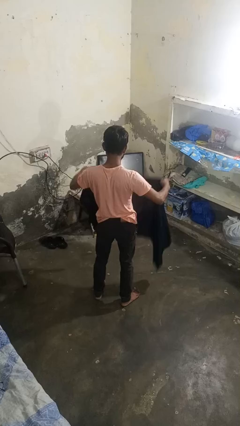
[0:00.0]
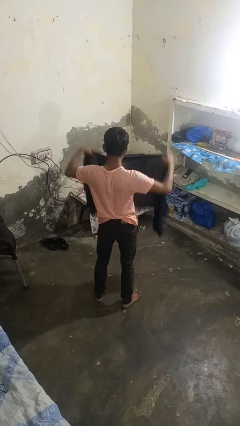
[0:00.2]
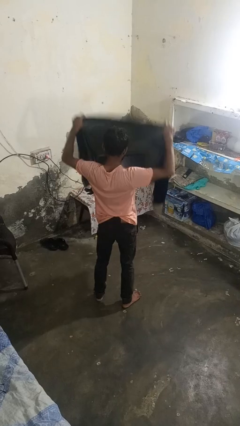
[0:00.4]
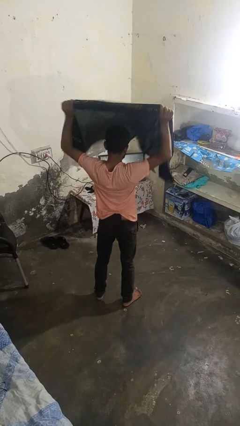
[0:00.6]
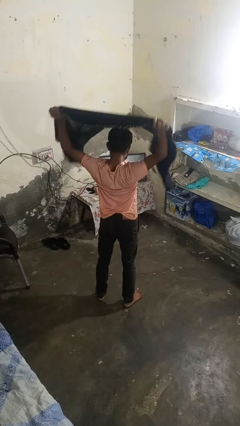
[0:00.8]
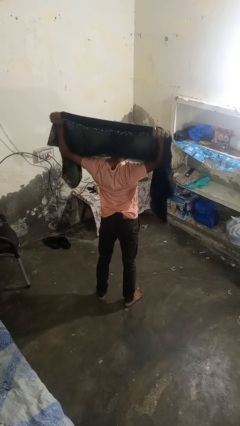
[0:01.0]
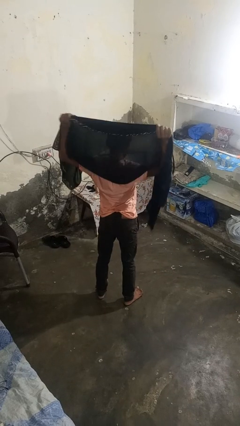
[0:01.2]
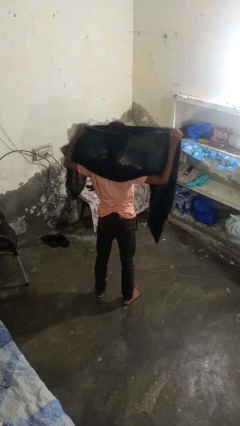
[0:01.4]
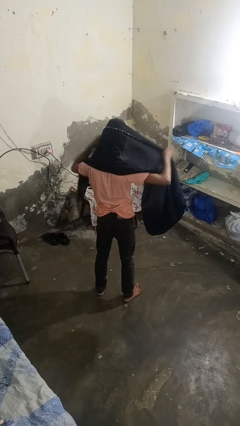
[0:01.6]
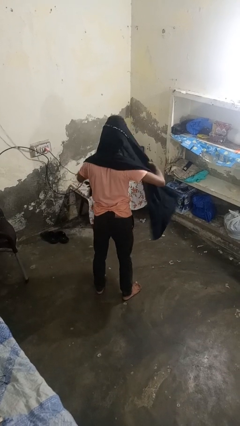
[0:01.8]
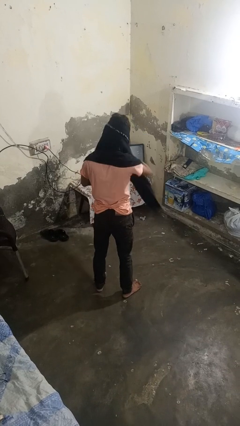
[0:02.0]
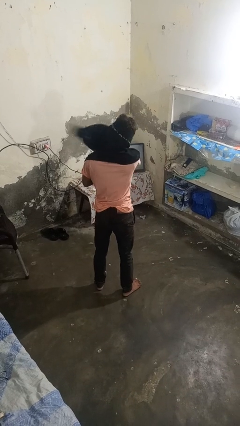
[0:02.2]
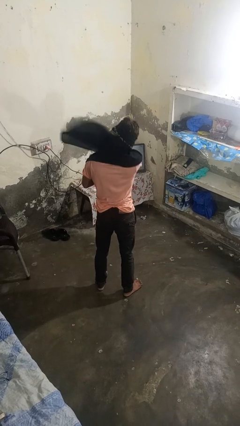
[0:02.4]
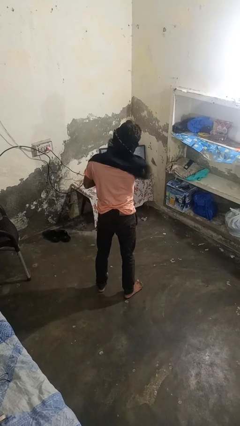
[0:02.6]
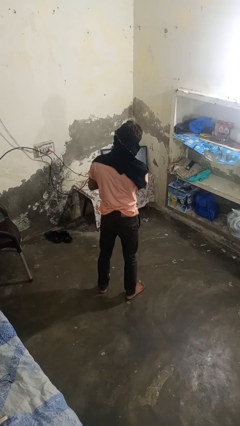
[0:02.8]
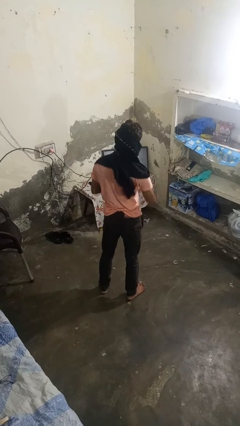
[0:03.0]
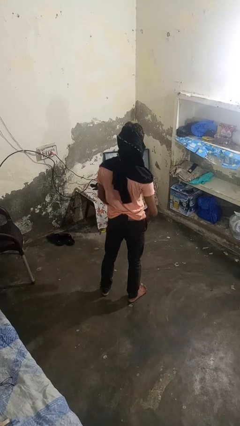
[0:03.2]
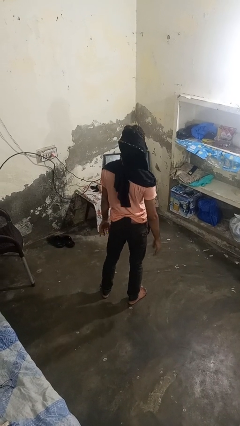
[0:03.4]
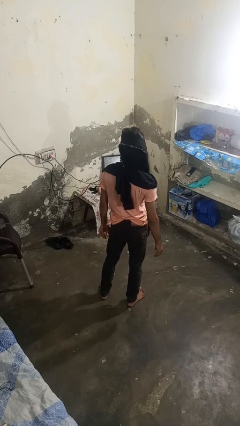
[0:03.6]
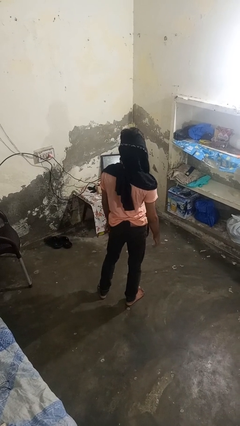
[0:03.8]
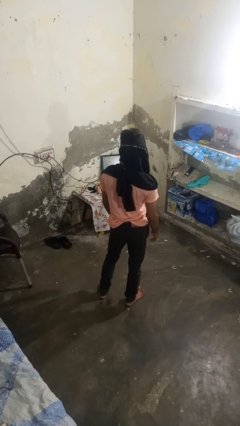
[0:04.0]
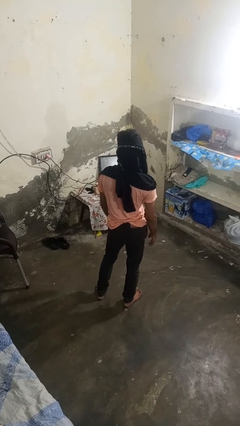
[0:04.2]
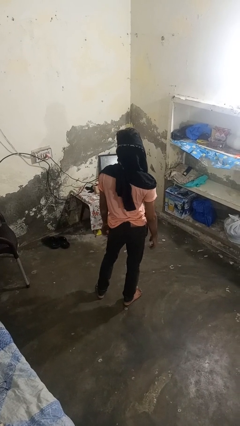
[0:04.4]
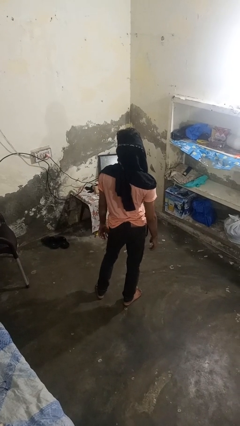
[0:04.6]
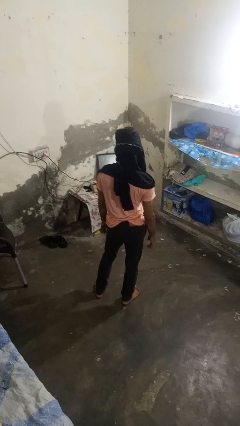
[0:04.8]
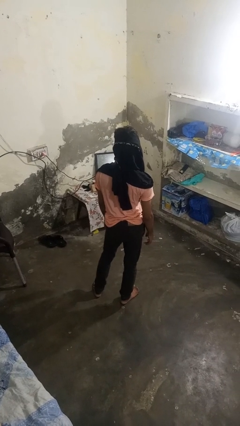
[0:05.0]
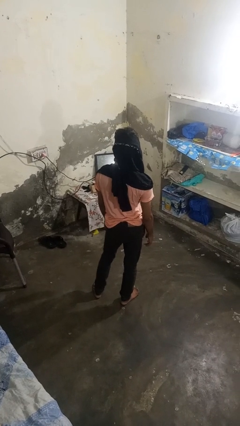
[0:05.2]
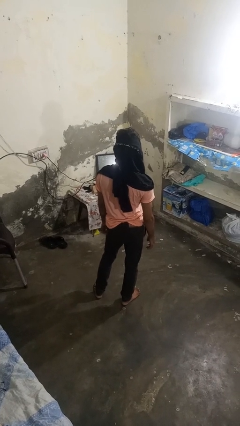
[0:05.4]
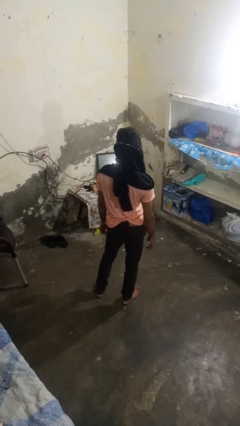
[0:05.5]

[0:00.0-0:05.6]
person puts on scarf

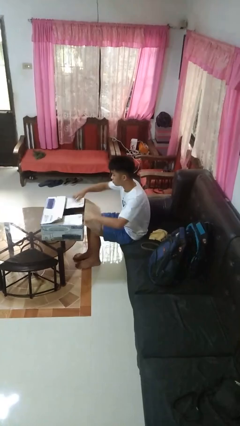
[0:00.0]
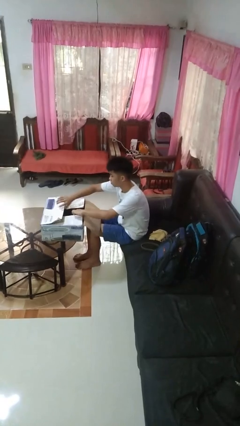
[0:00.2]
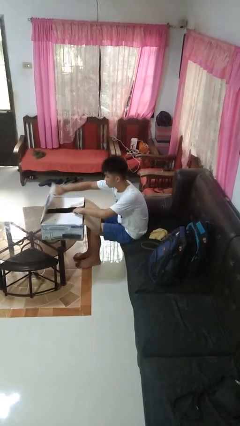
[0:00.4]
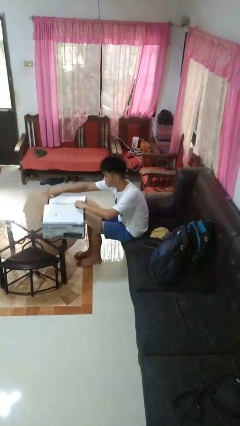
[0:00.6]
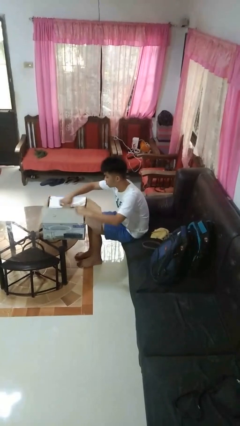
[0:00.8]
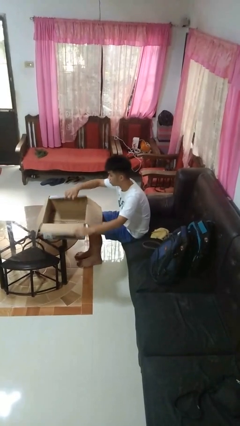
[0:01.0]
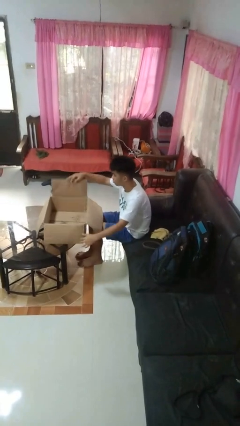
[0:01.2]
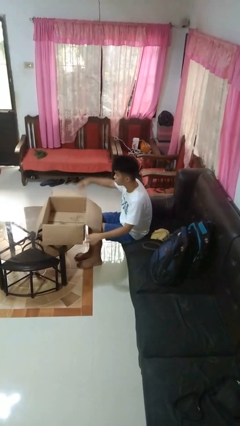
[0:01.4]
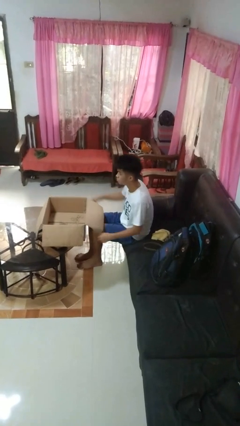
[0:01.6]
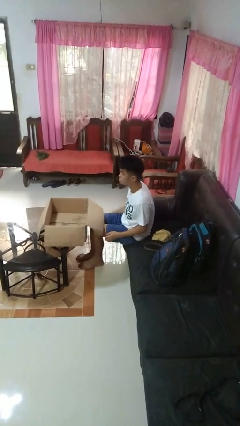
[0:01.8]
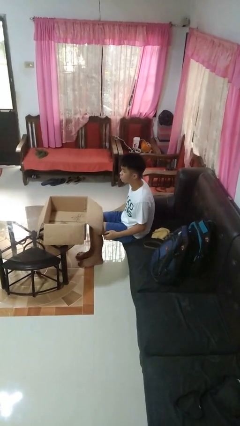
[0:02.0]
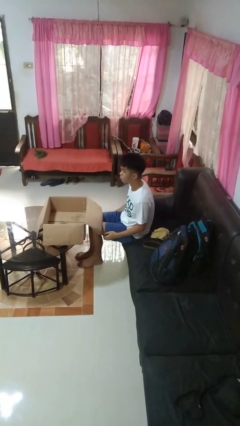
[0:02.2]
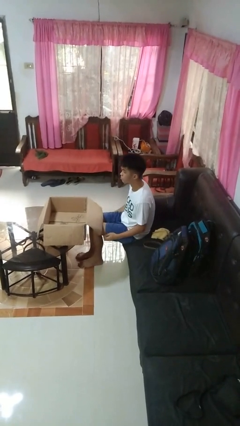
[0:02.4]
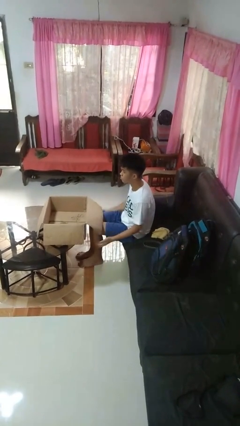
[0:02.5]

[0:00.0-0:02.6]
person opens box

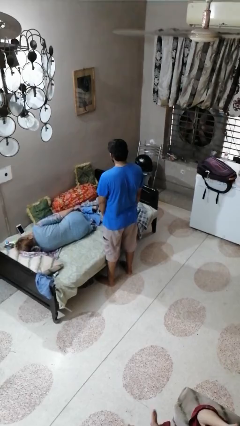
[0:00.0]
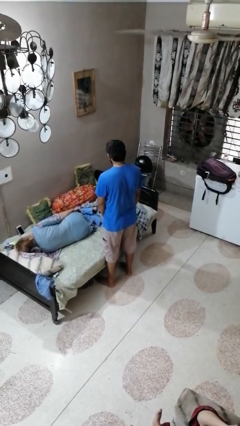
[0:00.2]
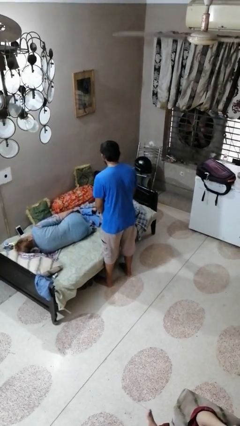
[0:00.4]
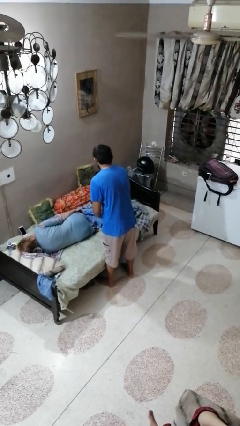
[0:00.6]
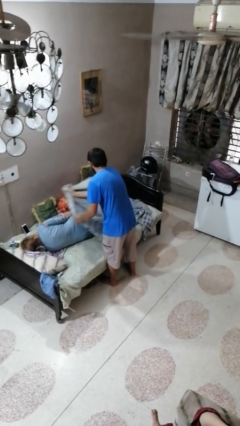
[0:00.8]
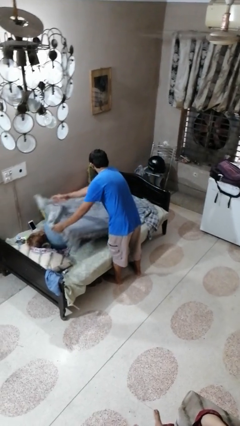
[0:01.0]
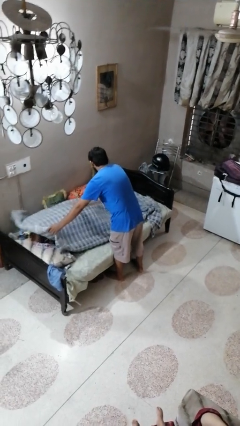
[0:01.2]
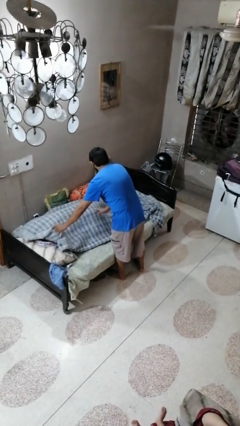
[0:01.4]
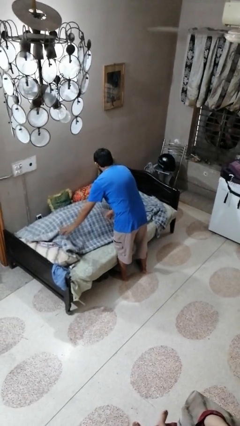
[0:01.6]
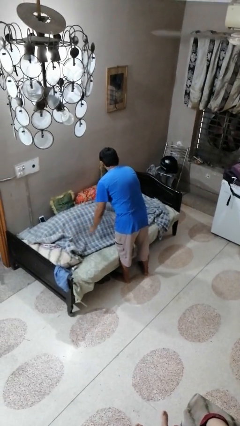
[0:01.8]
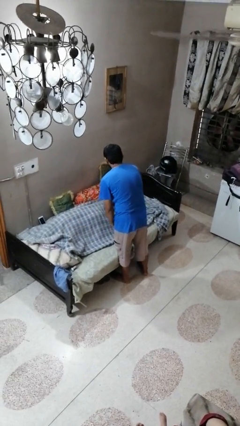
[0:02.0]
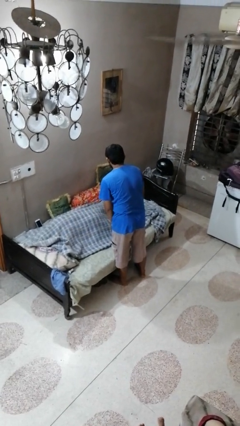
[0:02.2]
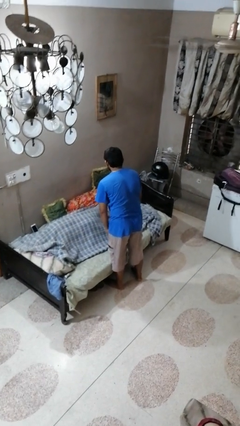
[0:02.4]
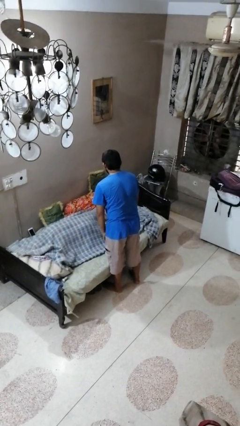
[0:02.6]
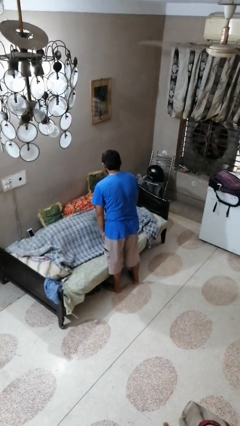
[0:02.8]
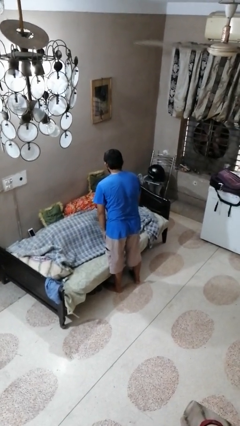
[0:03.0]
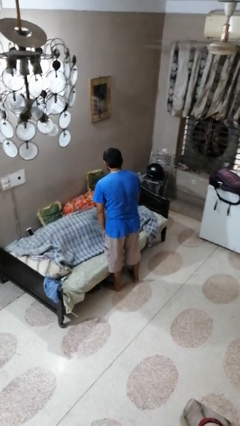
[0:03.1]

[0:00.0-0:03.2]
person covers friend with blanket

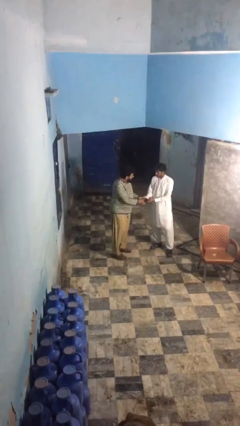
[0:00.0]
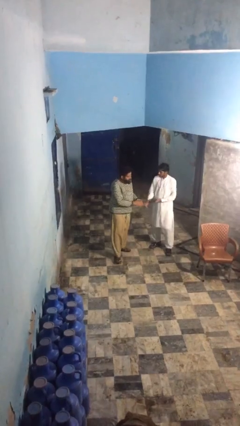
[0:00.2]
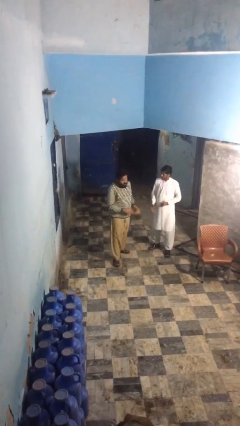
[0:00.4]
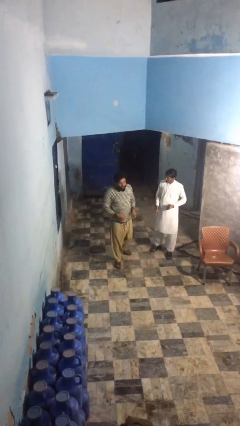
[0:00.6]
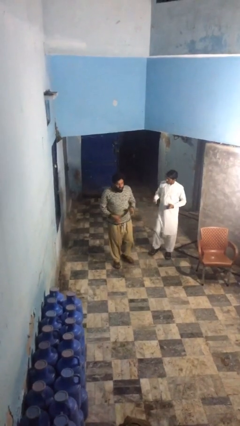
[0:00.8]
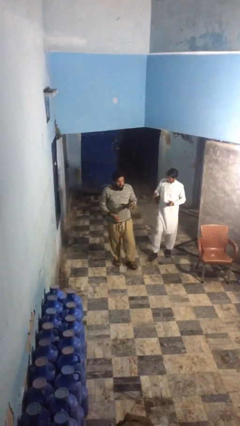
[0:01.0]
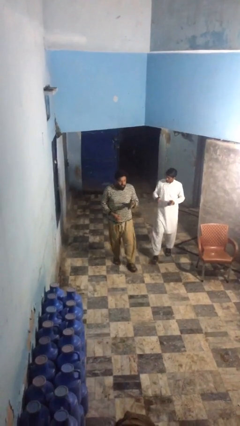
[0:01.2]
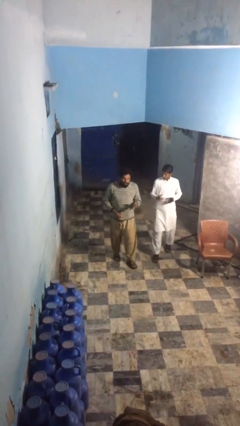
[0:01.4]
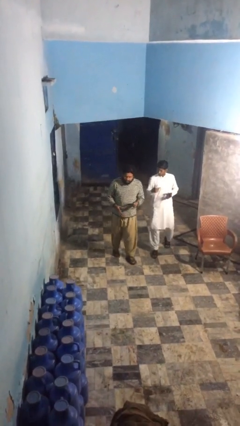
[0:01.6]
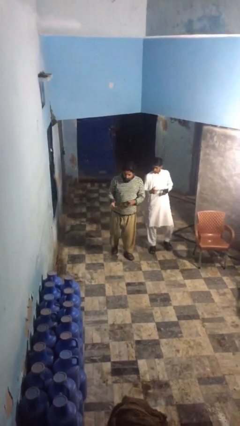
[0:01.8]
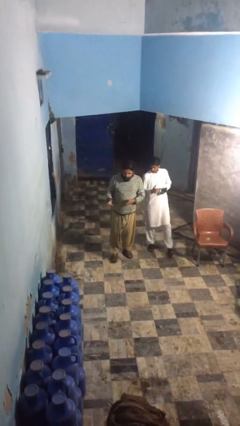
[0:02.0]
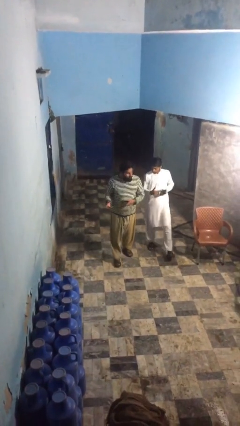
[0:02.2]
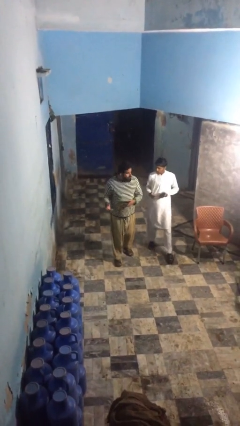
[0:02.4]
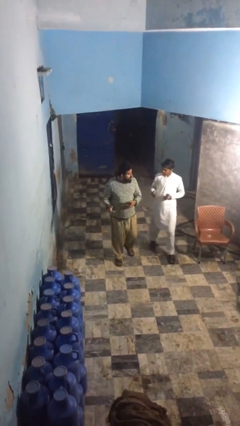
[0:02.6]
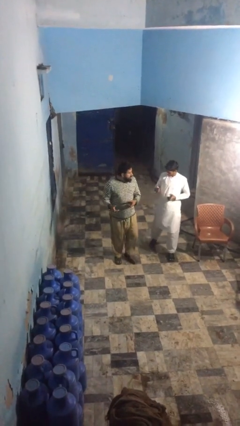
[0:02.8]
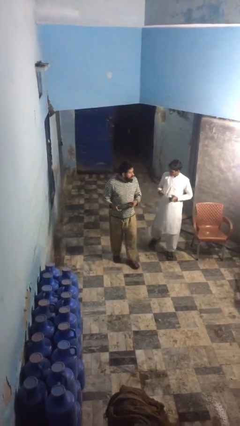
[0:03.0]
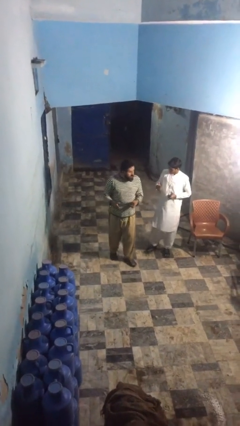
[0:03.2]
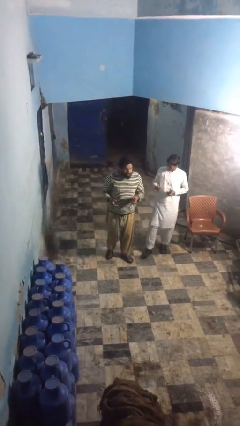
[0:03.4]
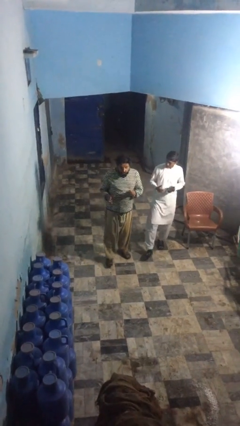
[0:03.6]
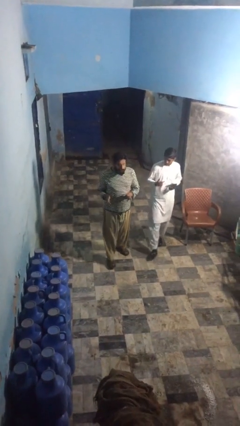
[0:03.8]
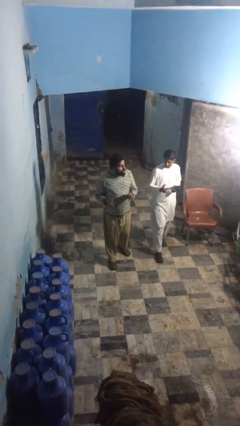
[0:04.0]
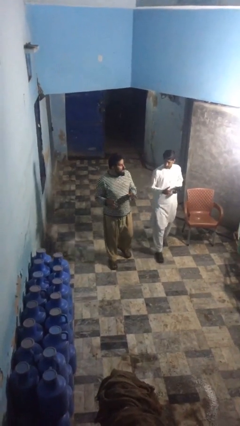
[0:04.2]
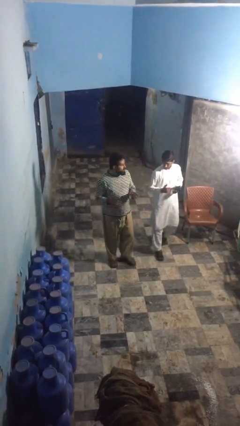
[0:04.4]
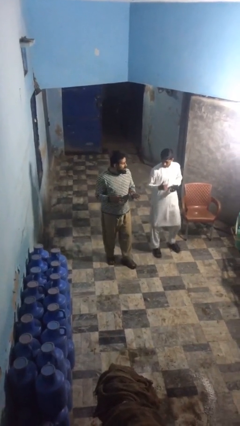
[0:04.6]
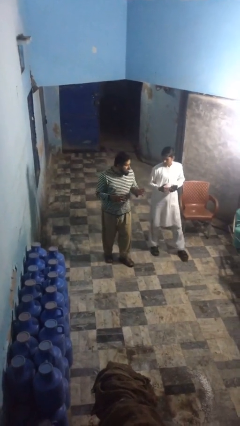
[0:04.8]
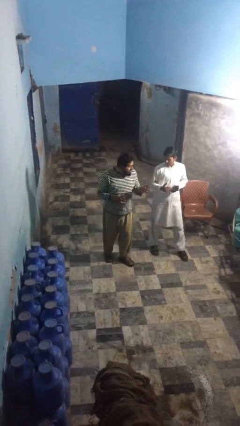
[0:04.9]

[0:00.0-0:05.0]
person talks to person

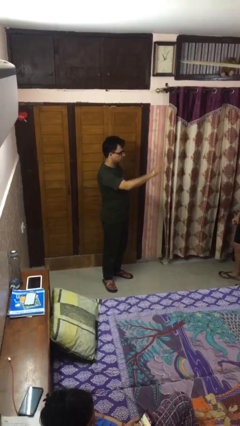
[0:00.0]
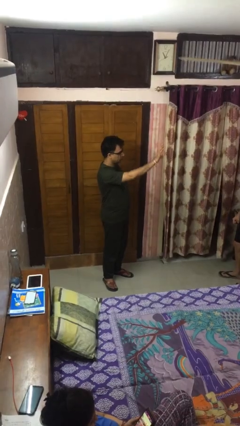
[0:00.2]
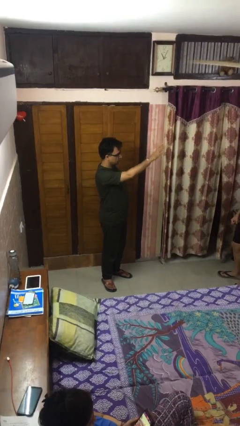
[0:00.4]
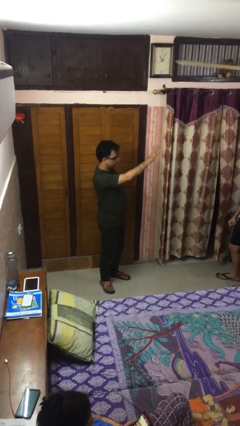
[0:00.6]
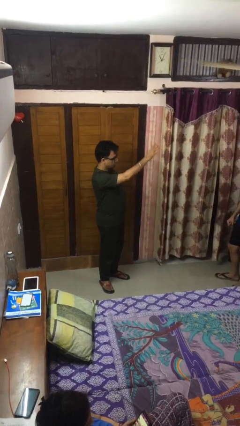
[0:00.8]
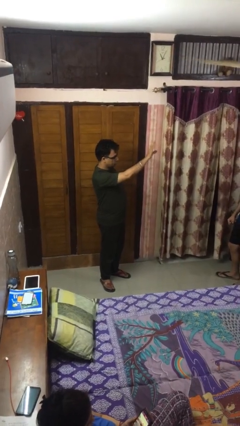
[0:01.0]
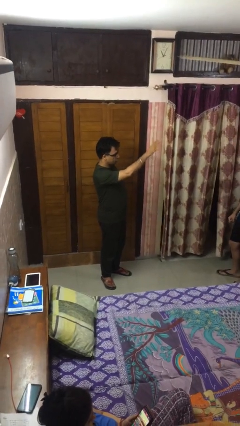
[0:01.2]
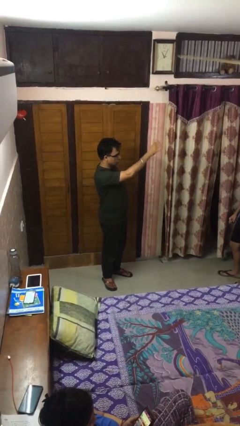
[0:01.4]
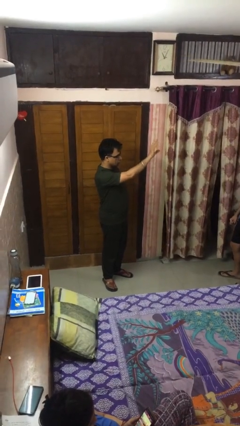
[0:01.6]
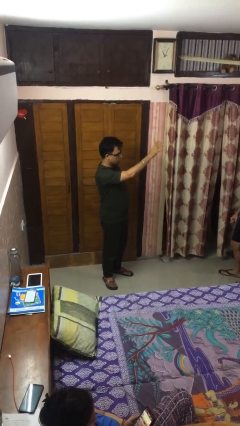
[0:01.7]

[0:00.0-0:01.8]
person waves at person
